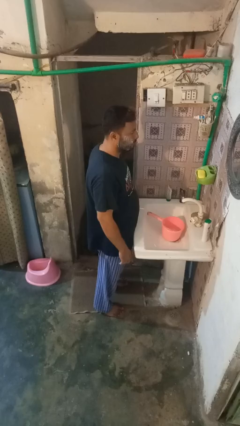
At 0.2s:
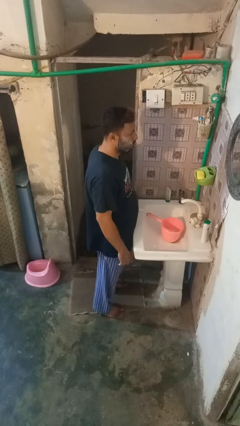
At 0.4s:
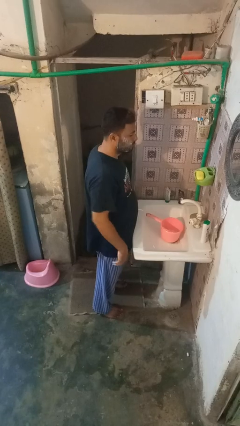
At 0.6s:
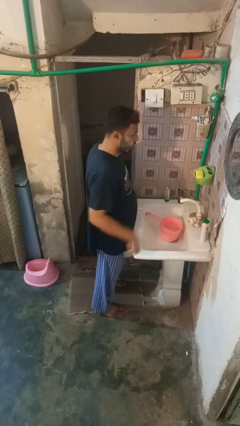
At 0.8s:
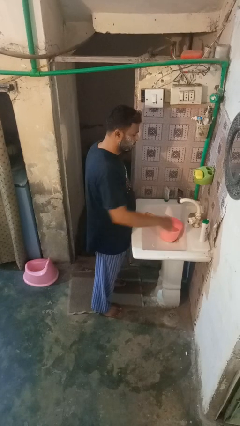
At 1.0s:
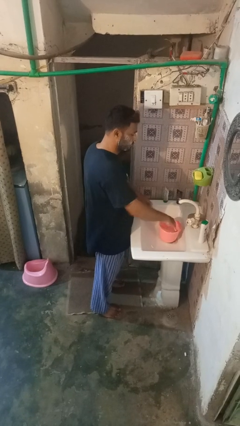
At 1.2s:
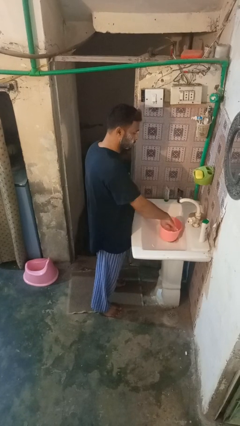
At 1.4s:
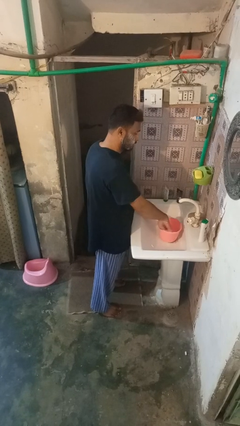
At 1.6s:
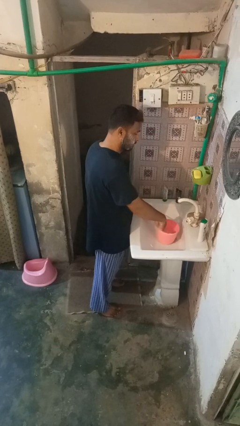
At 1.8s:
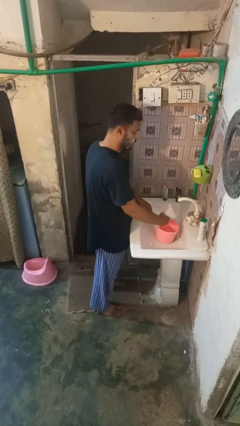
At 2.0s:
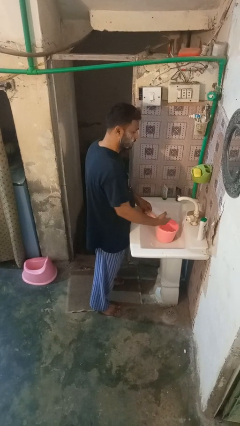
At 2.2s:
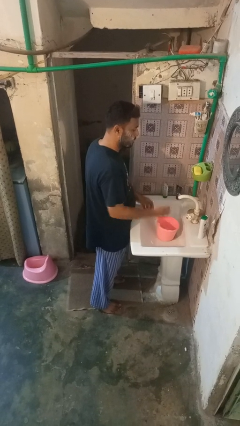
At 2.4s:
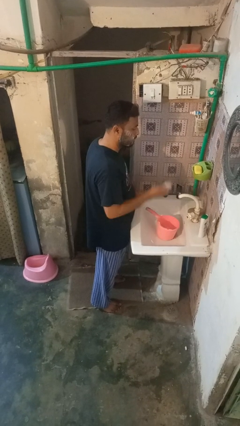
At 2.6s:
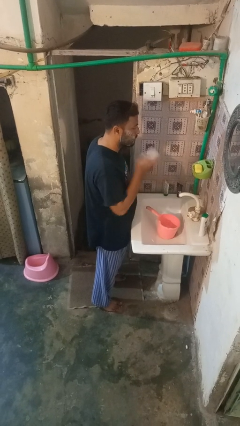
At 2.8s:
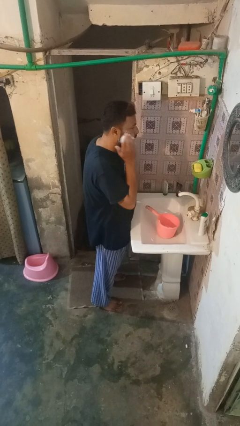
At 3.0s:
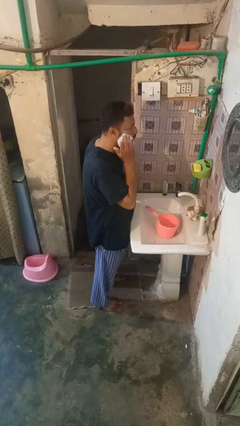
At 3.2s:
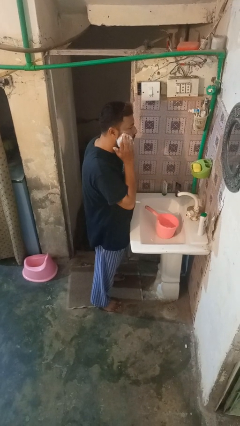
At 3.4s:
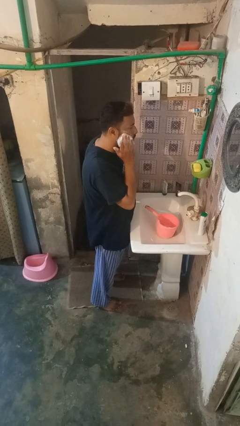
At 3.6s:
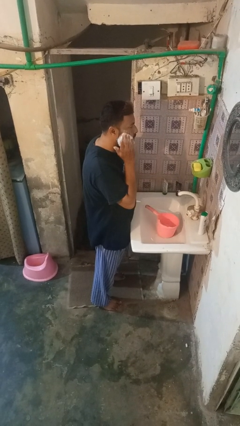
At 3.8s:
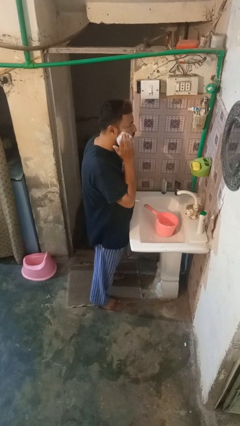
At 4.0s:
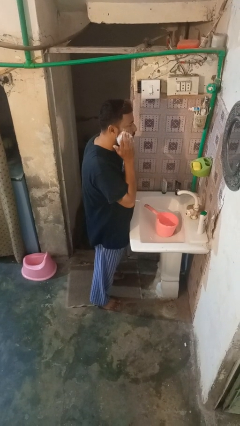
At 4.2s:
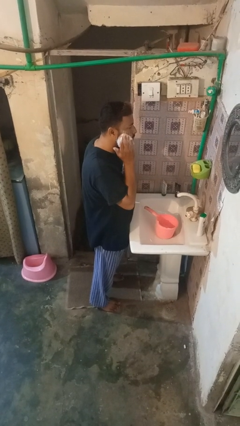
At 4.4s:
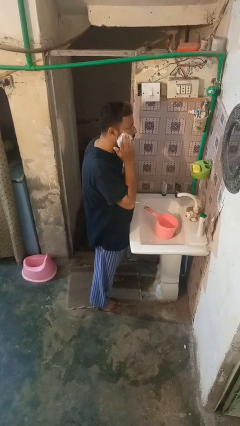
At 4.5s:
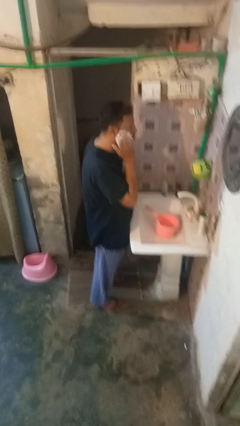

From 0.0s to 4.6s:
person applies shaving cream

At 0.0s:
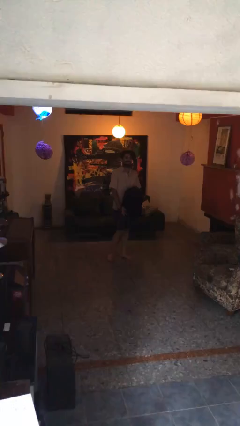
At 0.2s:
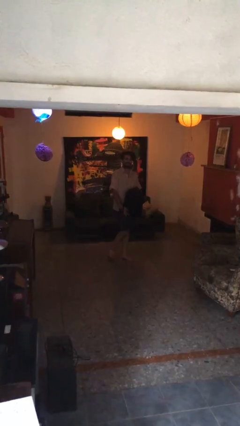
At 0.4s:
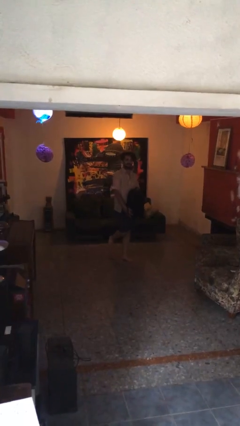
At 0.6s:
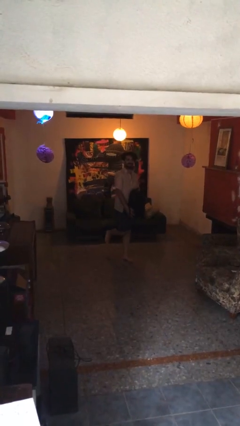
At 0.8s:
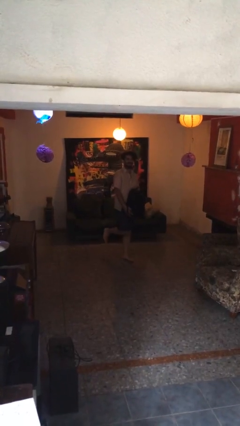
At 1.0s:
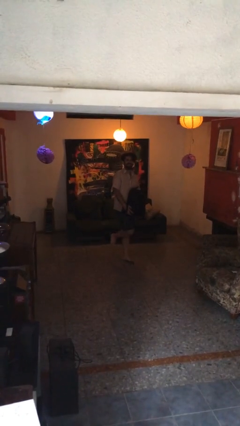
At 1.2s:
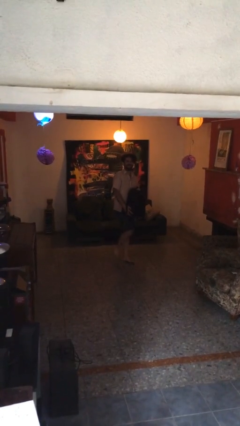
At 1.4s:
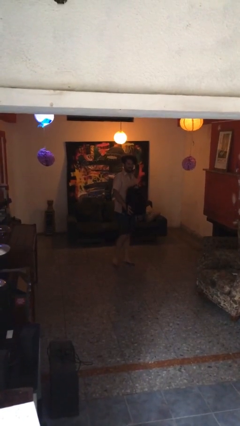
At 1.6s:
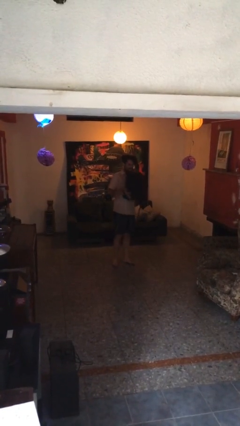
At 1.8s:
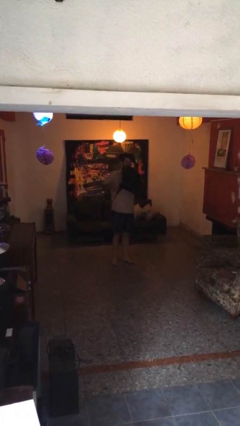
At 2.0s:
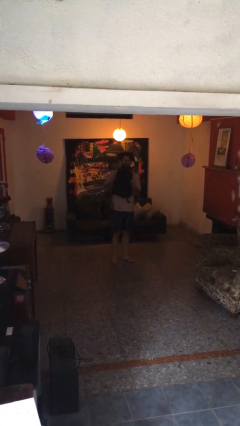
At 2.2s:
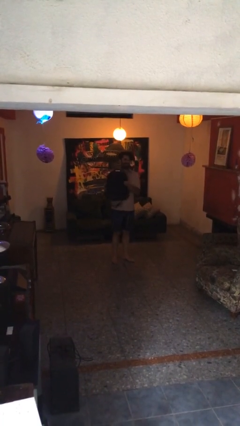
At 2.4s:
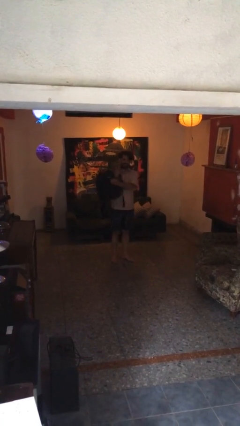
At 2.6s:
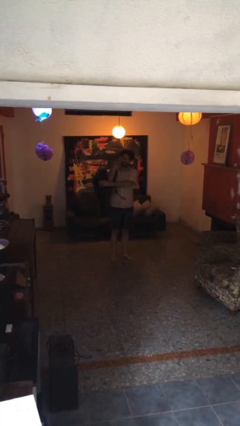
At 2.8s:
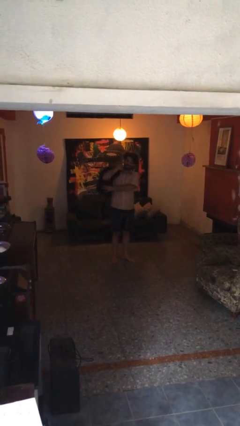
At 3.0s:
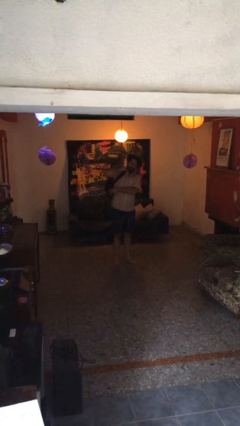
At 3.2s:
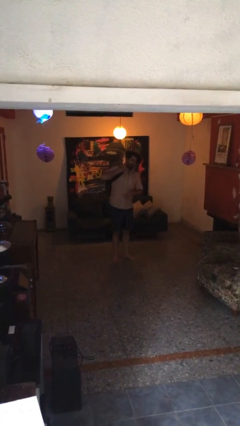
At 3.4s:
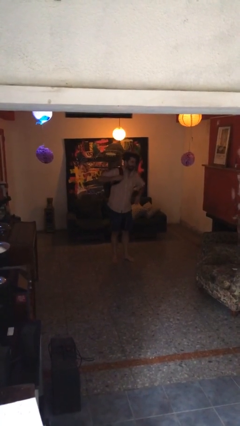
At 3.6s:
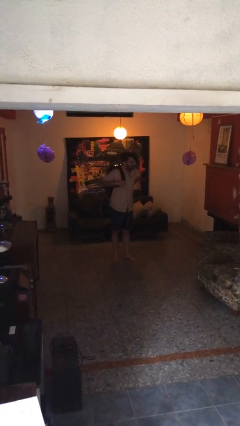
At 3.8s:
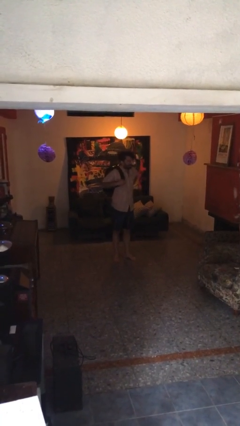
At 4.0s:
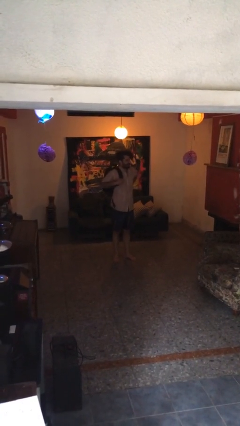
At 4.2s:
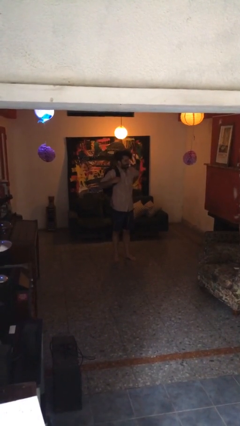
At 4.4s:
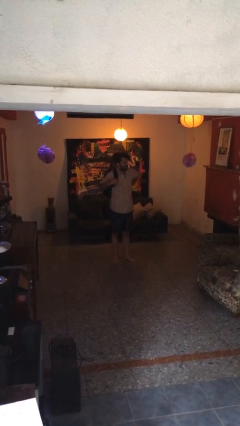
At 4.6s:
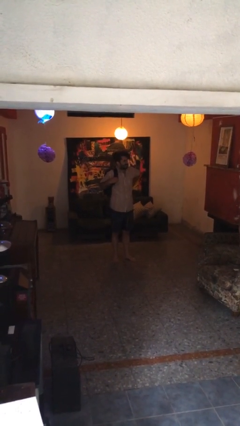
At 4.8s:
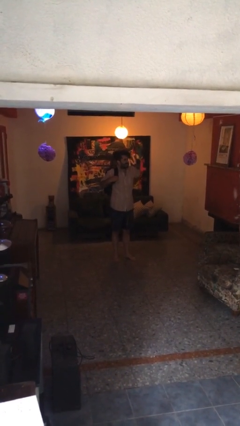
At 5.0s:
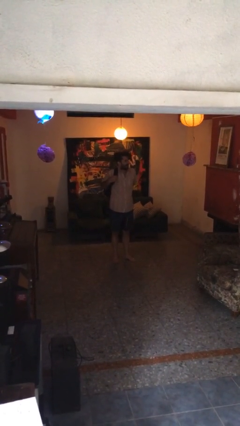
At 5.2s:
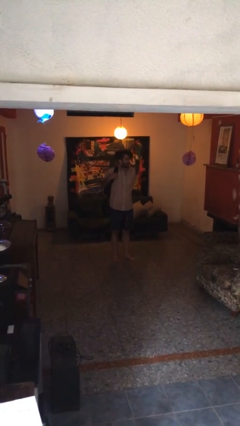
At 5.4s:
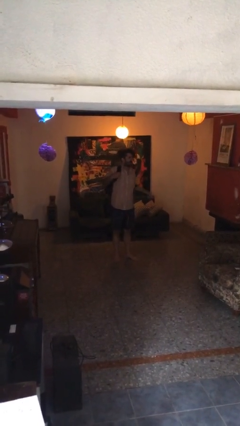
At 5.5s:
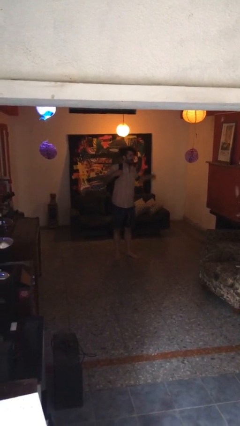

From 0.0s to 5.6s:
person puts on backpack

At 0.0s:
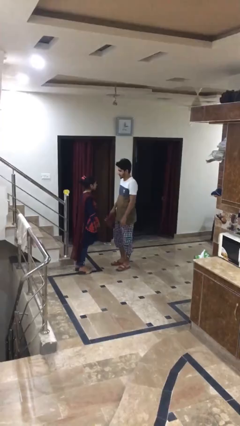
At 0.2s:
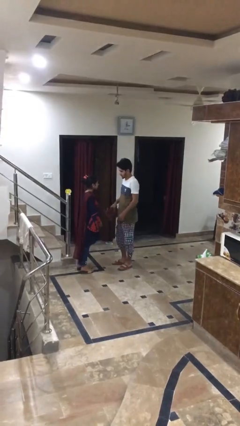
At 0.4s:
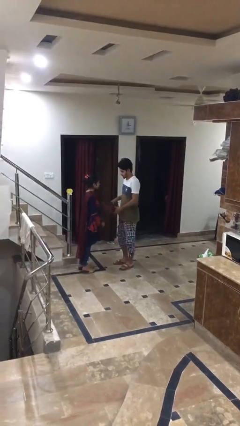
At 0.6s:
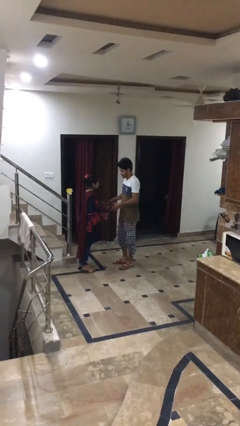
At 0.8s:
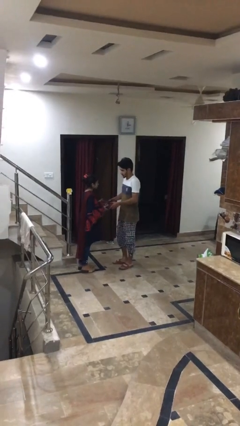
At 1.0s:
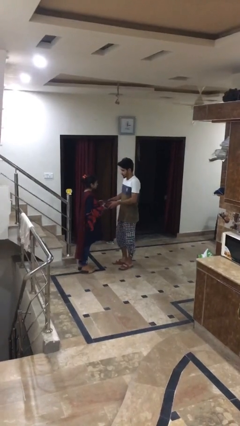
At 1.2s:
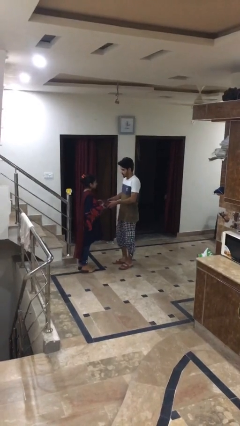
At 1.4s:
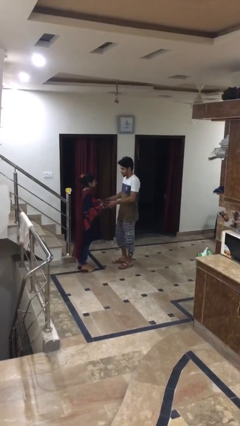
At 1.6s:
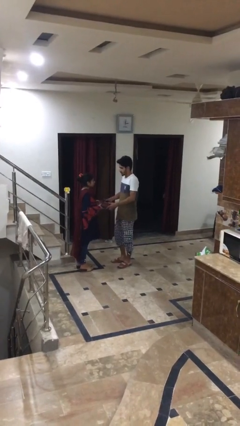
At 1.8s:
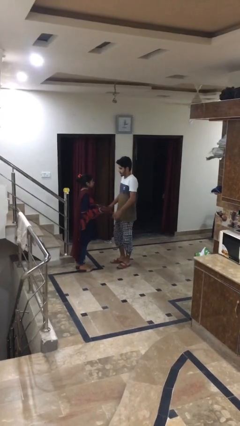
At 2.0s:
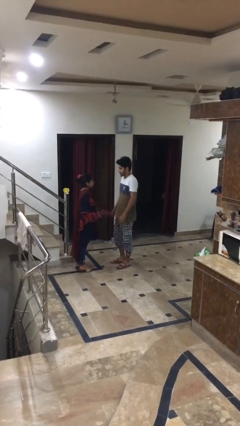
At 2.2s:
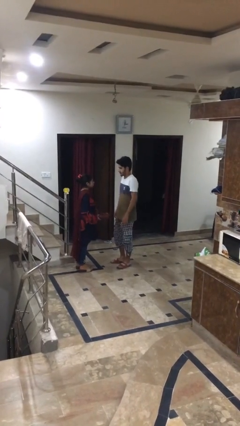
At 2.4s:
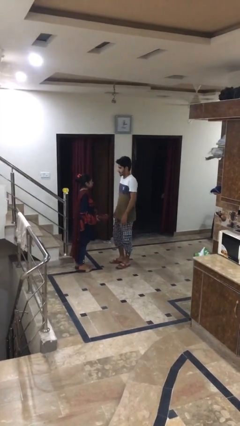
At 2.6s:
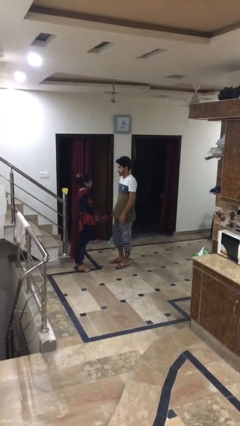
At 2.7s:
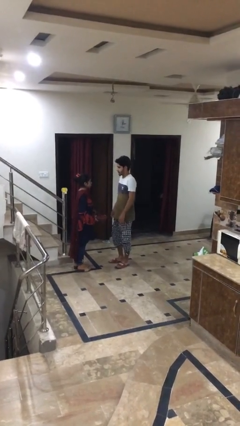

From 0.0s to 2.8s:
person transfers object to person

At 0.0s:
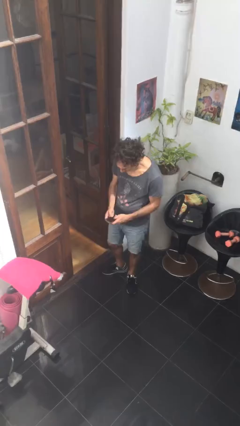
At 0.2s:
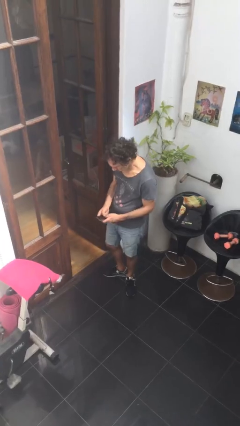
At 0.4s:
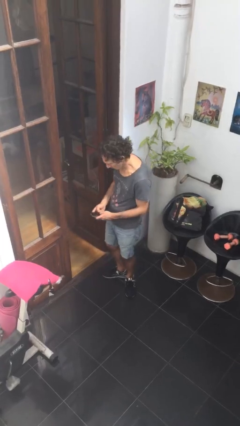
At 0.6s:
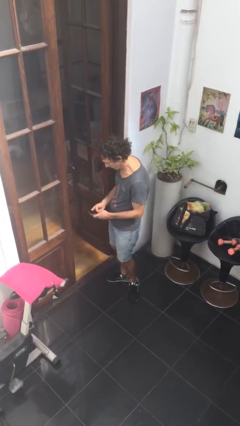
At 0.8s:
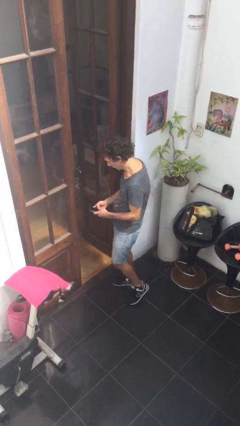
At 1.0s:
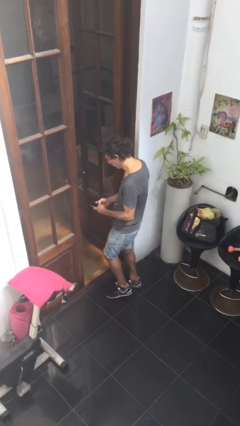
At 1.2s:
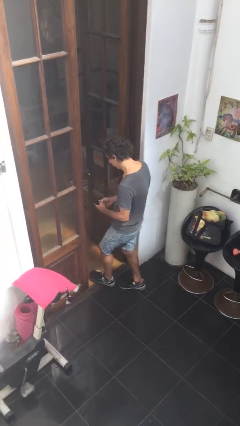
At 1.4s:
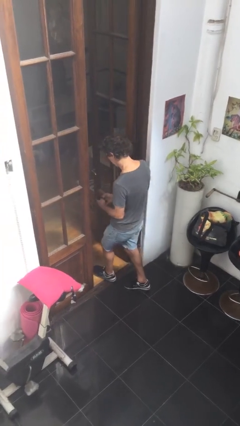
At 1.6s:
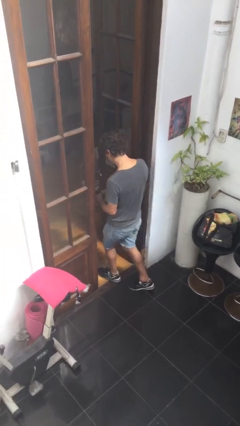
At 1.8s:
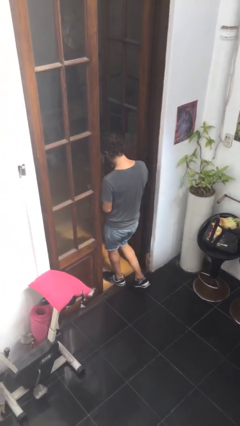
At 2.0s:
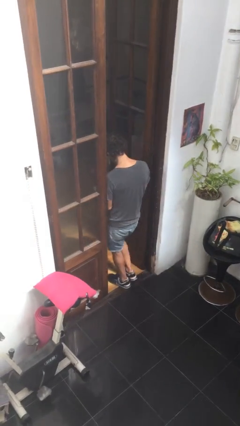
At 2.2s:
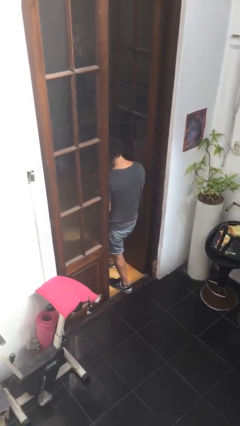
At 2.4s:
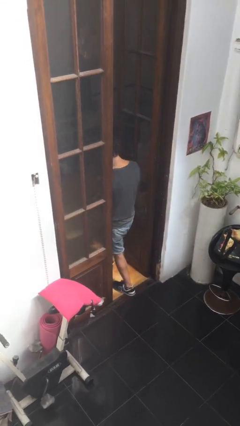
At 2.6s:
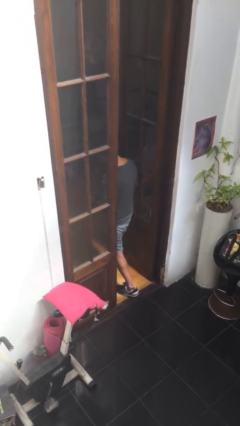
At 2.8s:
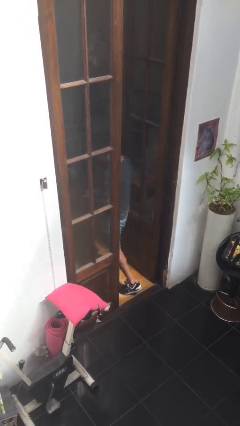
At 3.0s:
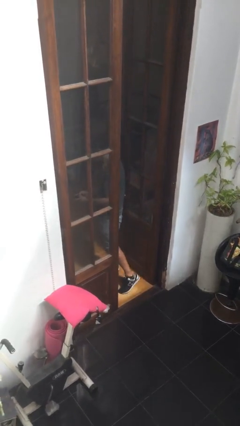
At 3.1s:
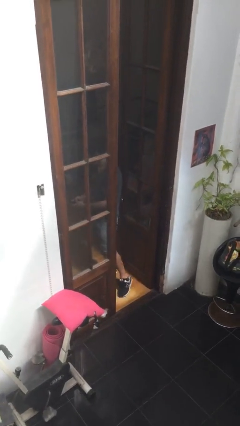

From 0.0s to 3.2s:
person exits scene through structure

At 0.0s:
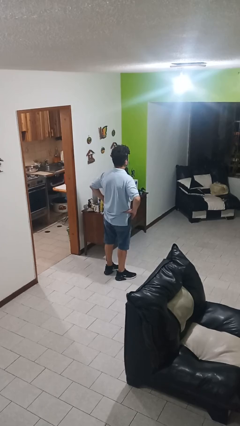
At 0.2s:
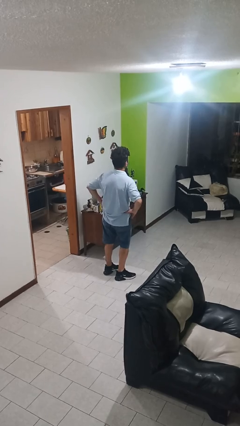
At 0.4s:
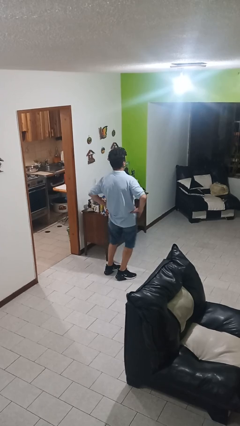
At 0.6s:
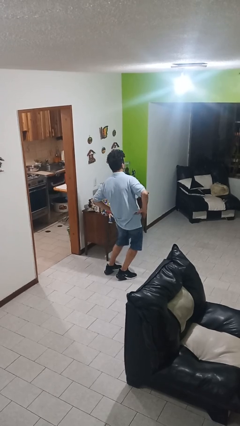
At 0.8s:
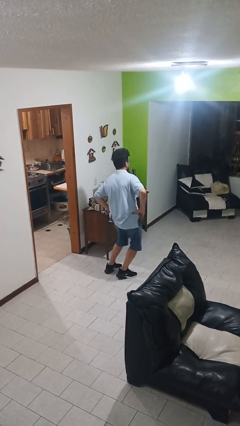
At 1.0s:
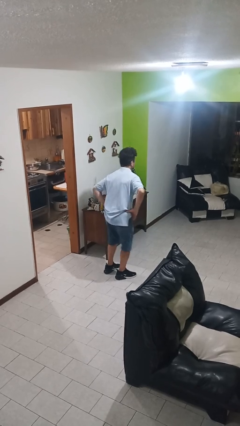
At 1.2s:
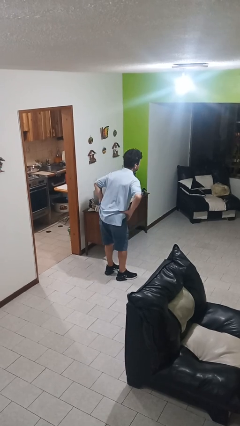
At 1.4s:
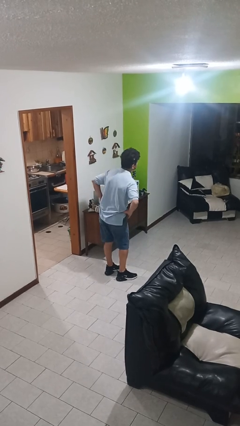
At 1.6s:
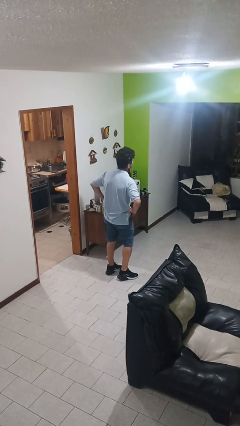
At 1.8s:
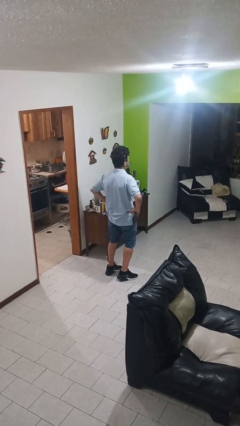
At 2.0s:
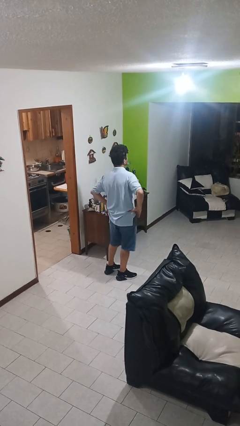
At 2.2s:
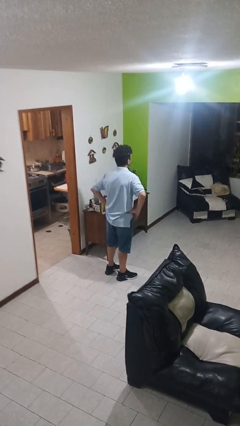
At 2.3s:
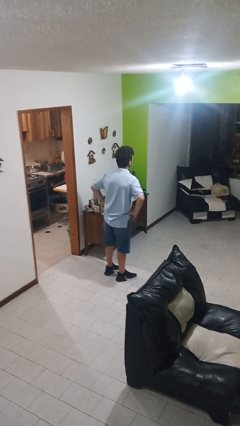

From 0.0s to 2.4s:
person wiggles hips
